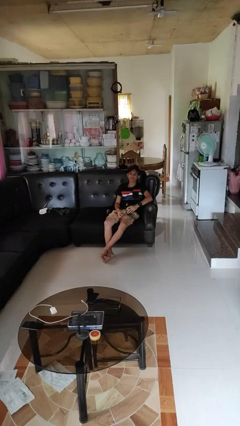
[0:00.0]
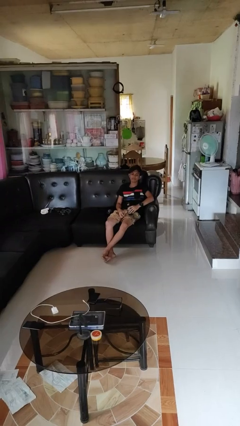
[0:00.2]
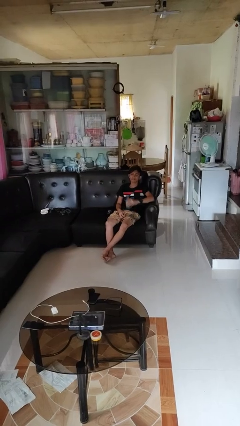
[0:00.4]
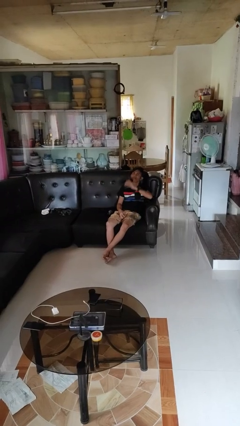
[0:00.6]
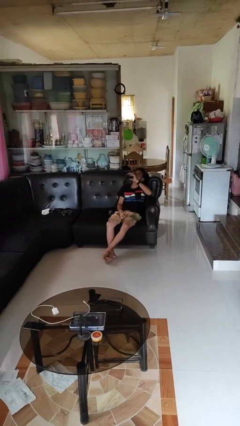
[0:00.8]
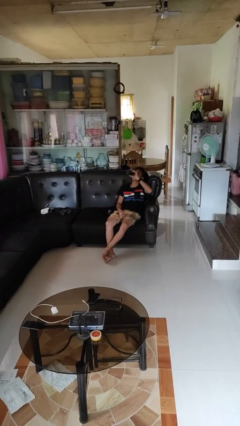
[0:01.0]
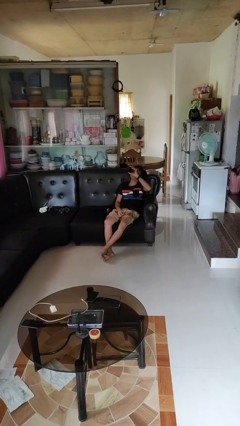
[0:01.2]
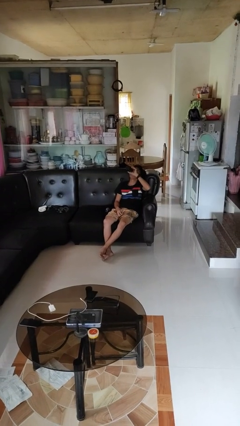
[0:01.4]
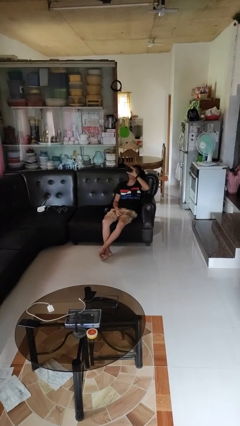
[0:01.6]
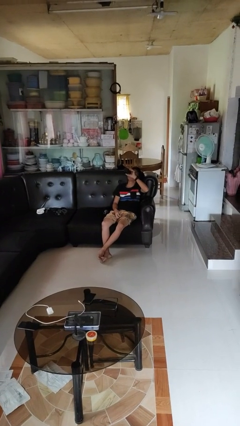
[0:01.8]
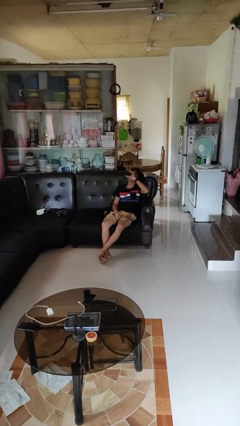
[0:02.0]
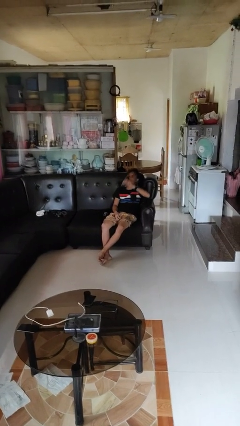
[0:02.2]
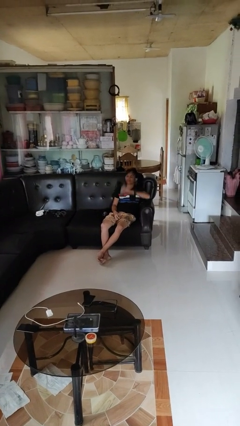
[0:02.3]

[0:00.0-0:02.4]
person drinks from bottle

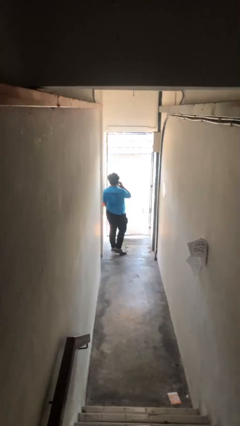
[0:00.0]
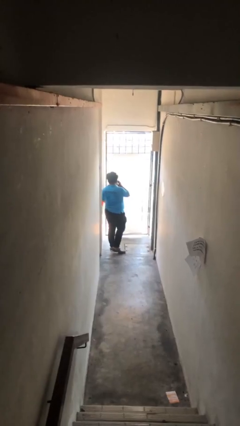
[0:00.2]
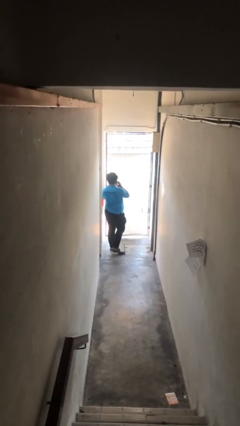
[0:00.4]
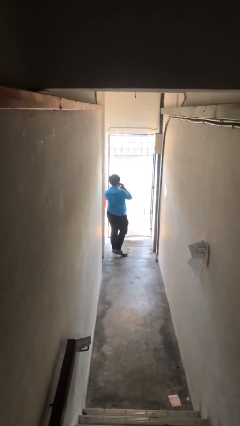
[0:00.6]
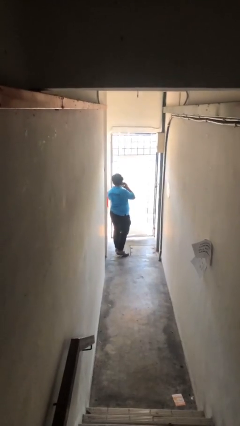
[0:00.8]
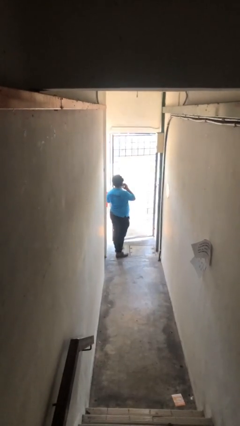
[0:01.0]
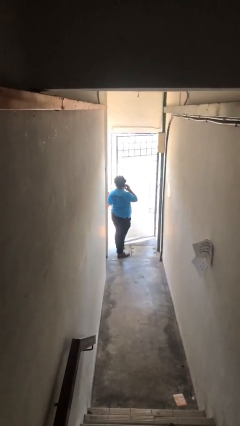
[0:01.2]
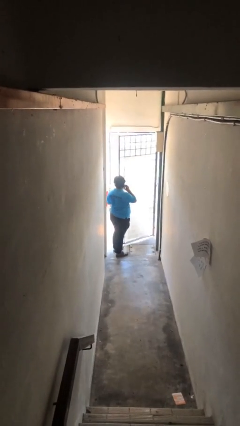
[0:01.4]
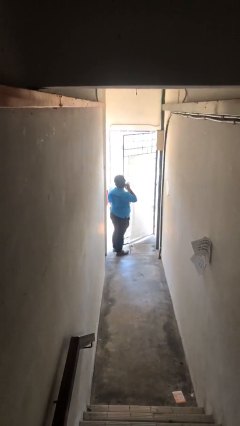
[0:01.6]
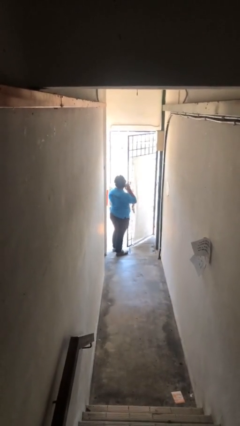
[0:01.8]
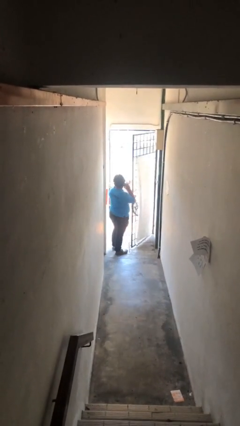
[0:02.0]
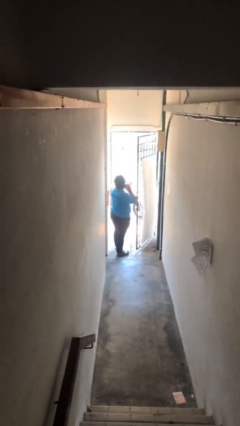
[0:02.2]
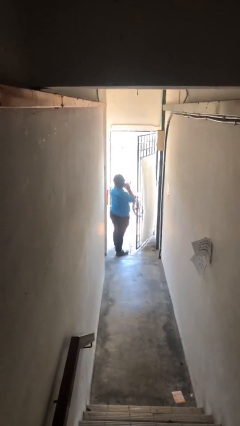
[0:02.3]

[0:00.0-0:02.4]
person opens facility door

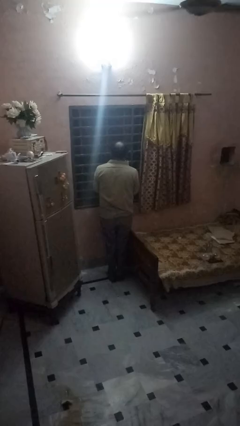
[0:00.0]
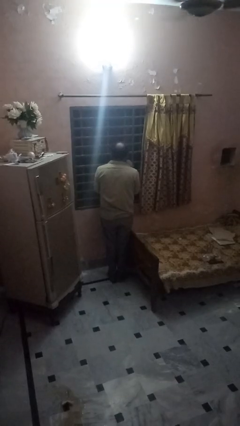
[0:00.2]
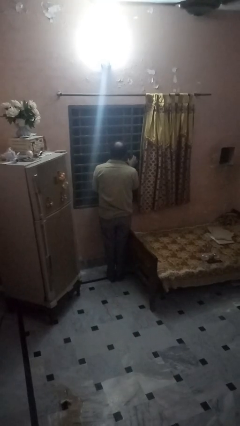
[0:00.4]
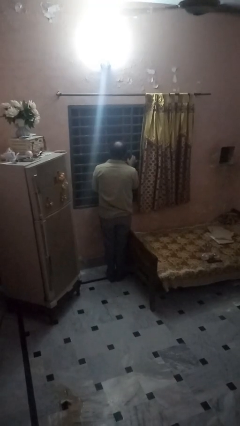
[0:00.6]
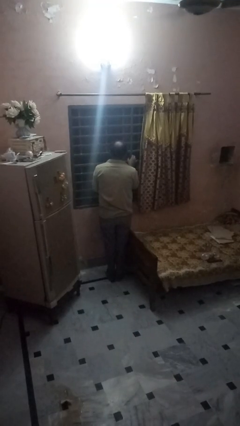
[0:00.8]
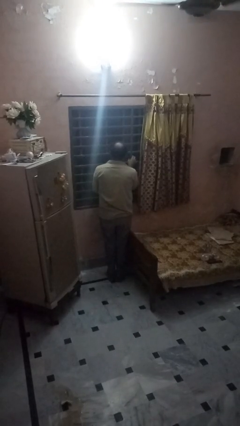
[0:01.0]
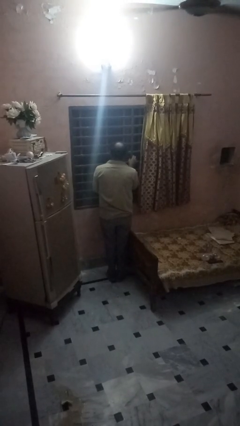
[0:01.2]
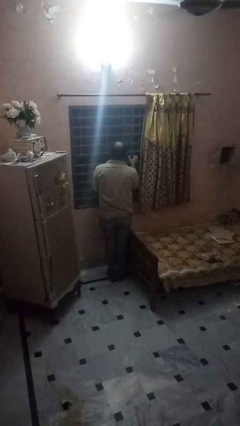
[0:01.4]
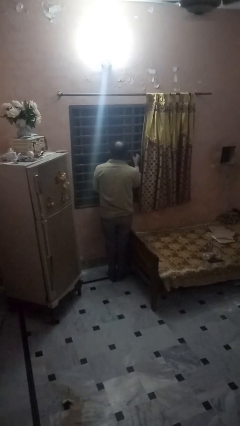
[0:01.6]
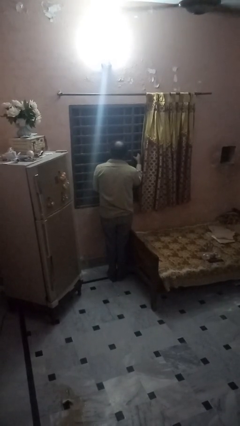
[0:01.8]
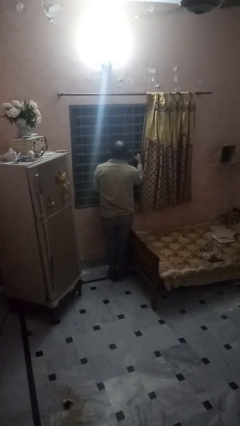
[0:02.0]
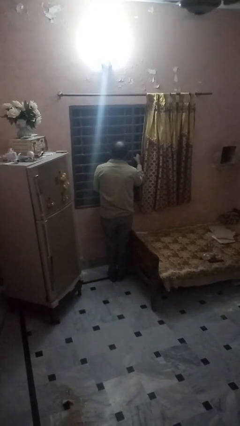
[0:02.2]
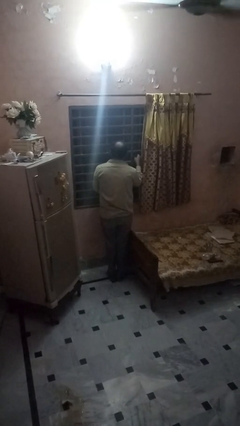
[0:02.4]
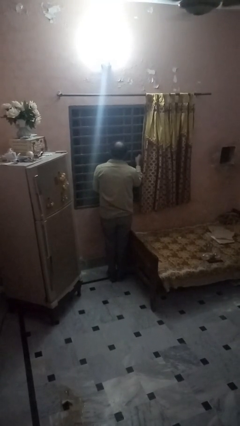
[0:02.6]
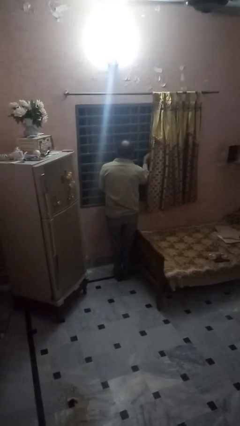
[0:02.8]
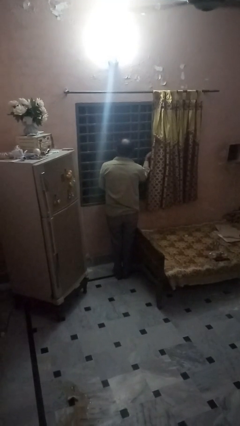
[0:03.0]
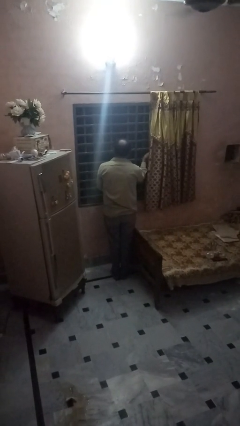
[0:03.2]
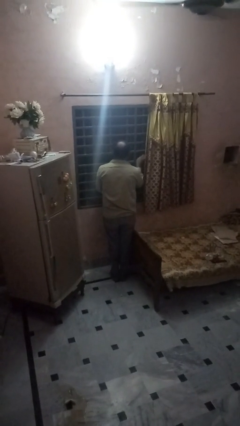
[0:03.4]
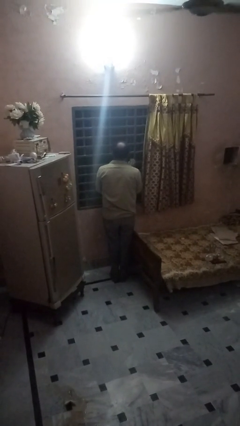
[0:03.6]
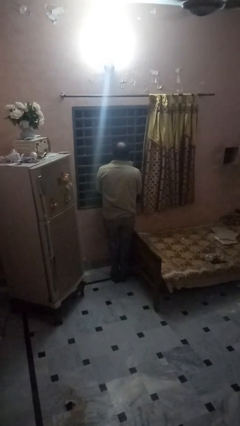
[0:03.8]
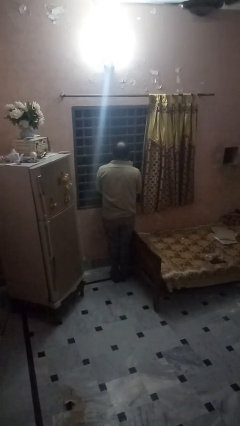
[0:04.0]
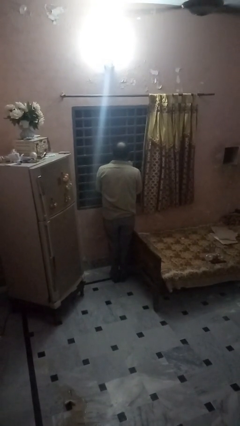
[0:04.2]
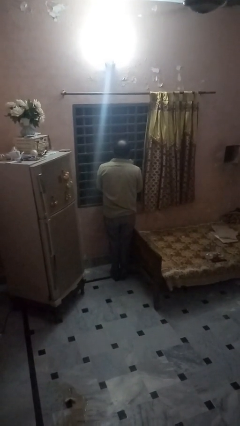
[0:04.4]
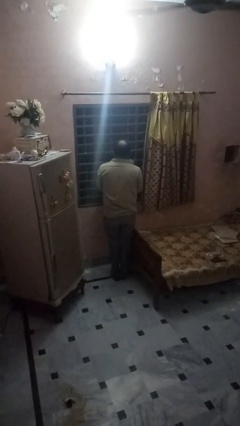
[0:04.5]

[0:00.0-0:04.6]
person opens home window

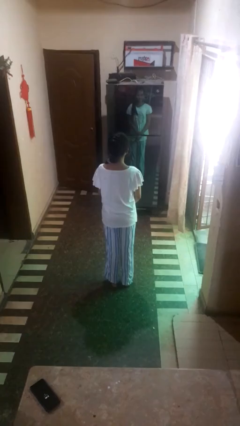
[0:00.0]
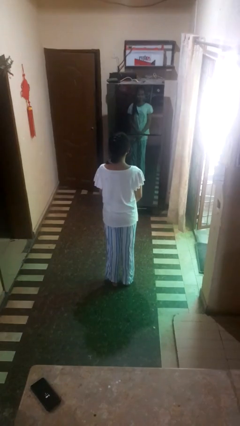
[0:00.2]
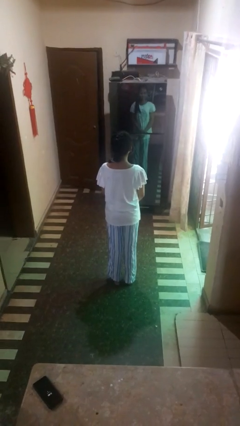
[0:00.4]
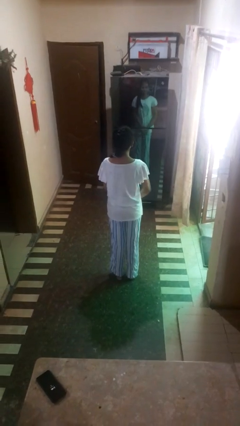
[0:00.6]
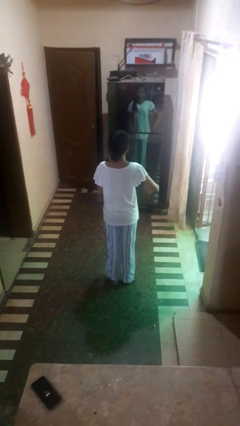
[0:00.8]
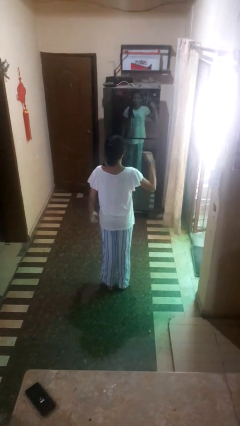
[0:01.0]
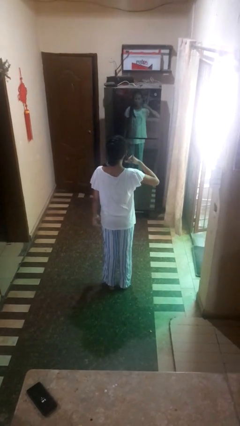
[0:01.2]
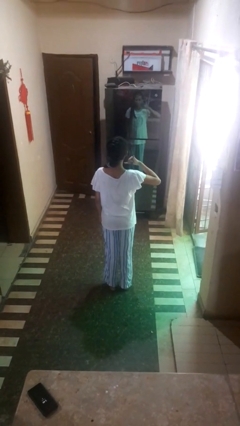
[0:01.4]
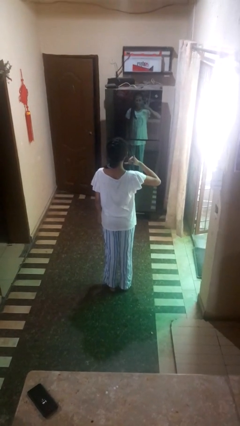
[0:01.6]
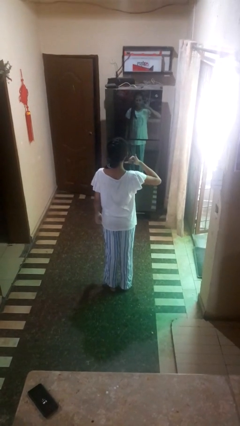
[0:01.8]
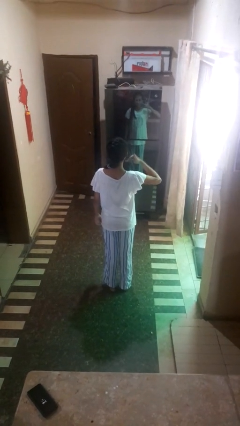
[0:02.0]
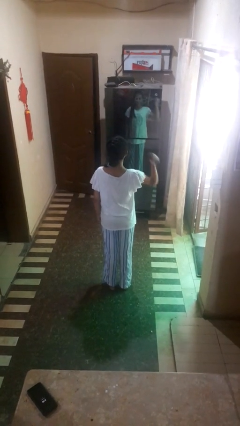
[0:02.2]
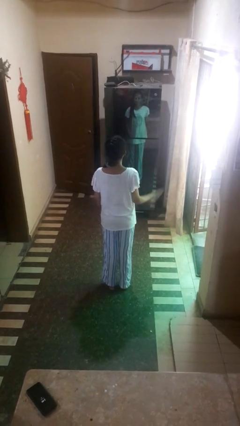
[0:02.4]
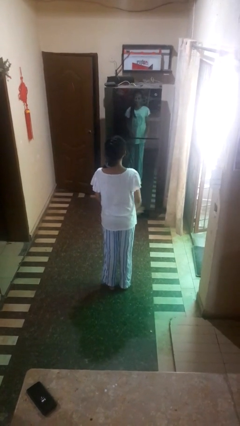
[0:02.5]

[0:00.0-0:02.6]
person gestures call me

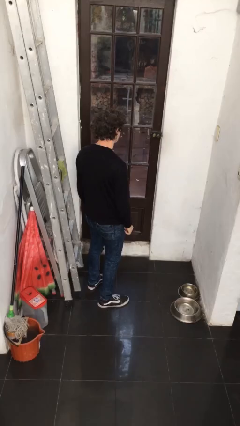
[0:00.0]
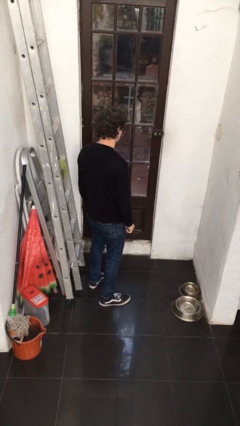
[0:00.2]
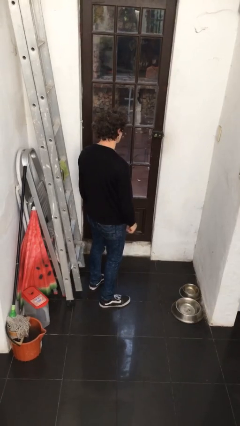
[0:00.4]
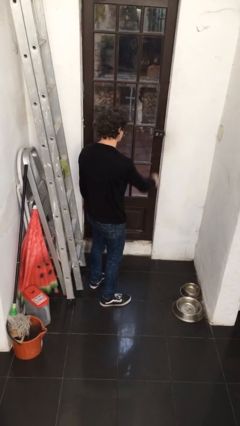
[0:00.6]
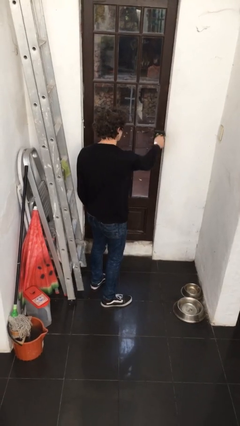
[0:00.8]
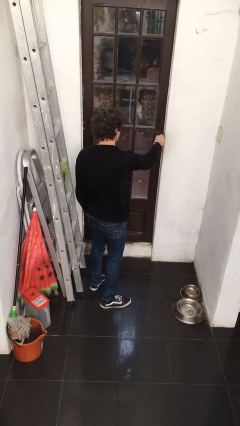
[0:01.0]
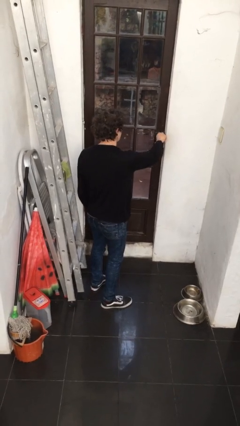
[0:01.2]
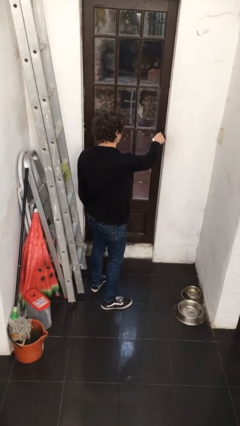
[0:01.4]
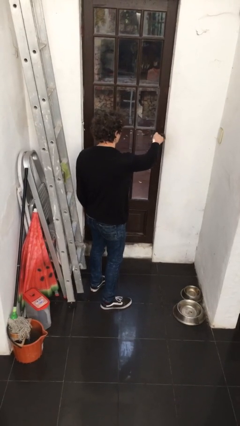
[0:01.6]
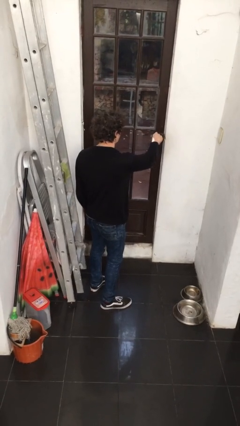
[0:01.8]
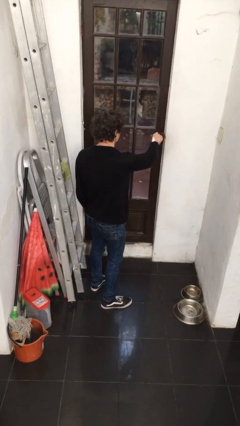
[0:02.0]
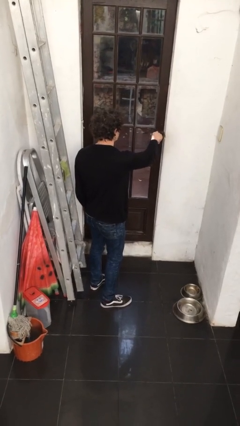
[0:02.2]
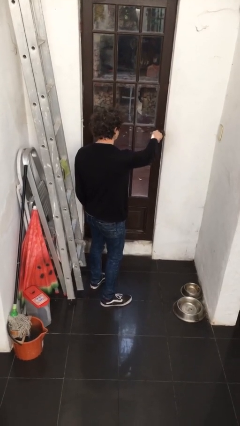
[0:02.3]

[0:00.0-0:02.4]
person unlocks door with keys

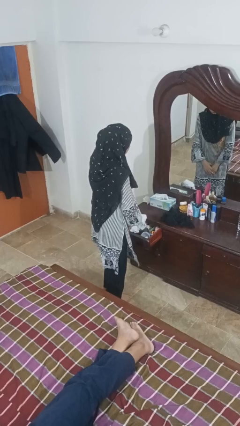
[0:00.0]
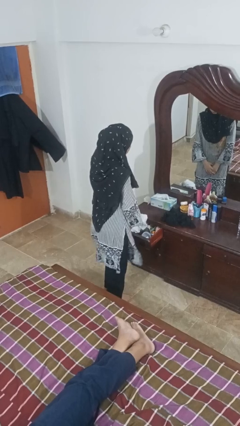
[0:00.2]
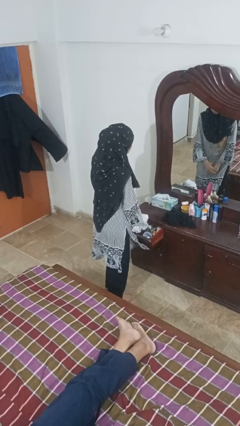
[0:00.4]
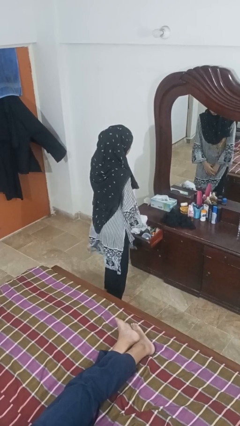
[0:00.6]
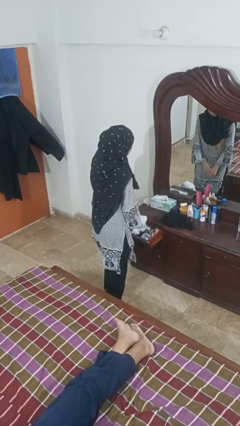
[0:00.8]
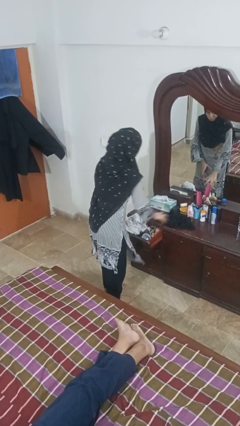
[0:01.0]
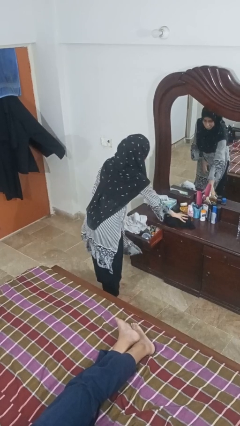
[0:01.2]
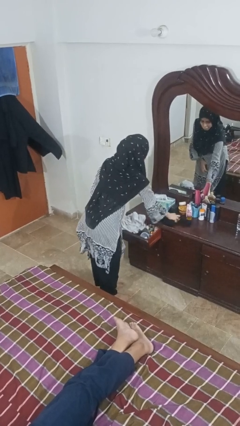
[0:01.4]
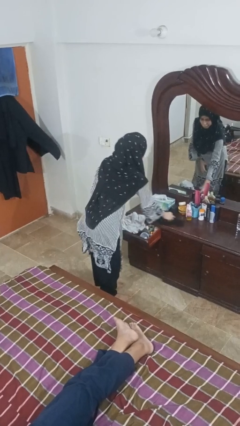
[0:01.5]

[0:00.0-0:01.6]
person puts clothes into dresser

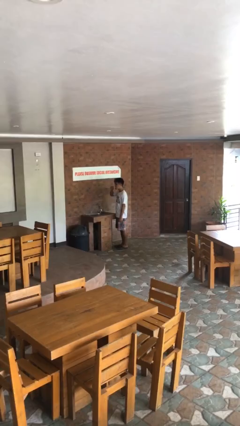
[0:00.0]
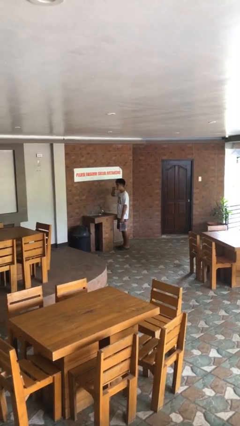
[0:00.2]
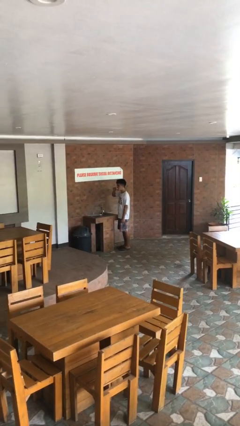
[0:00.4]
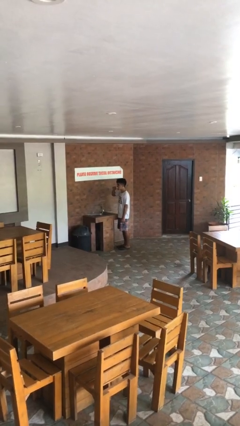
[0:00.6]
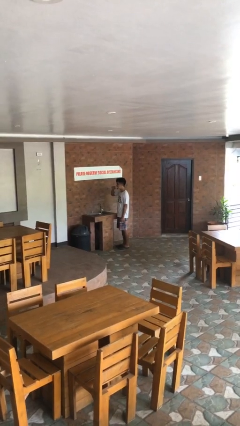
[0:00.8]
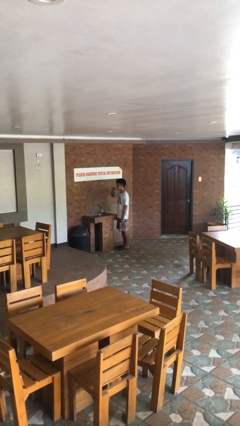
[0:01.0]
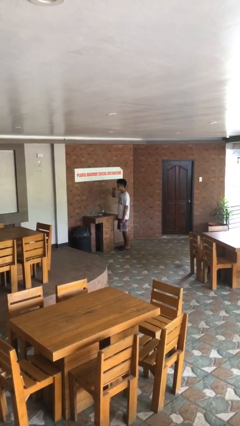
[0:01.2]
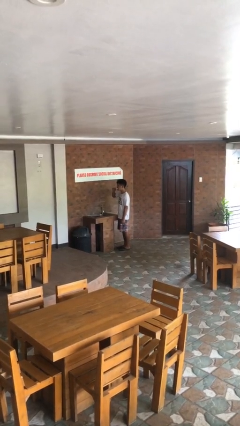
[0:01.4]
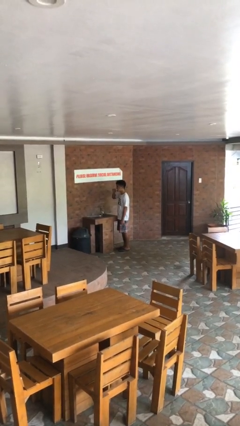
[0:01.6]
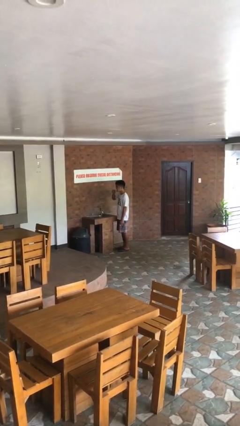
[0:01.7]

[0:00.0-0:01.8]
person brushes teeth
